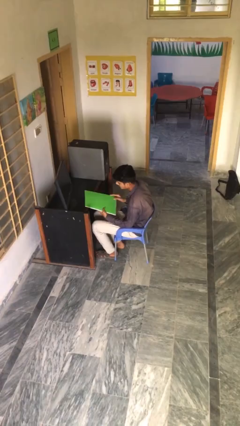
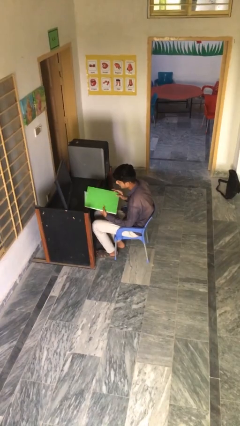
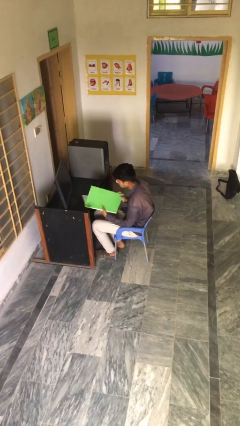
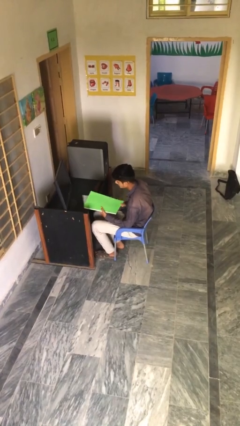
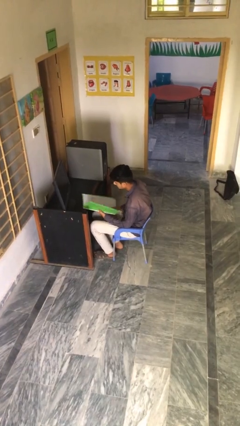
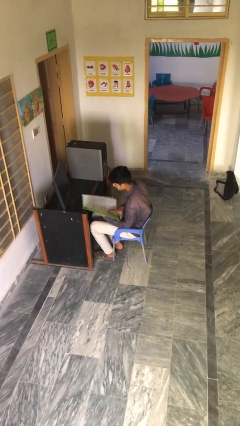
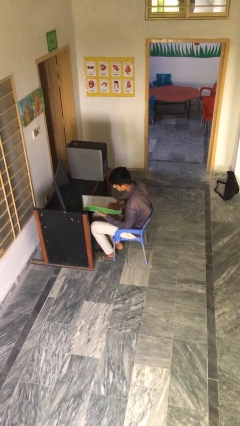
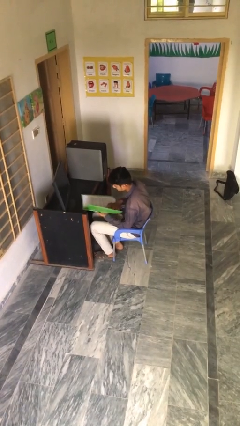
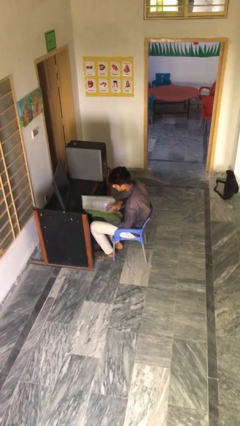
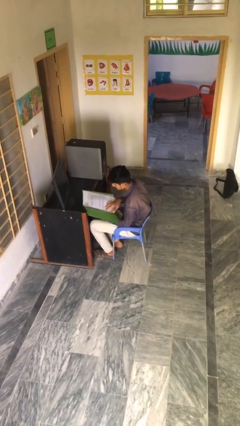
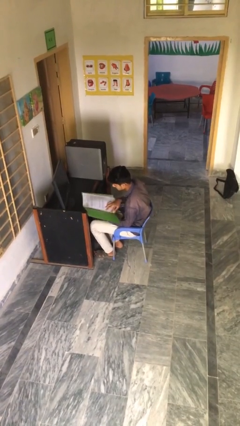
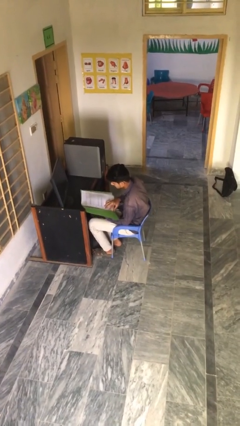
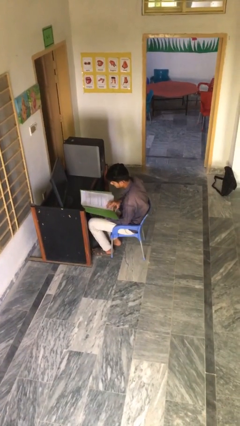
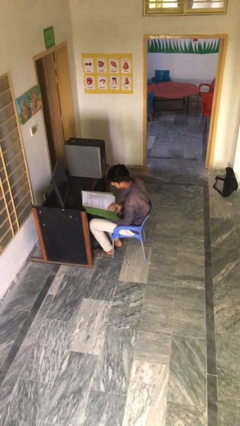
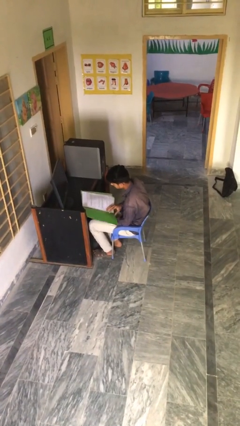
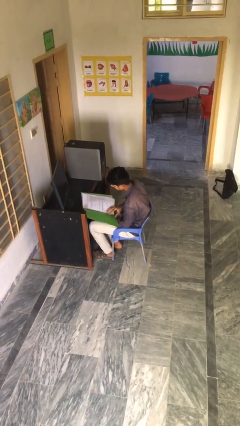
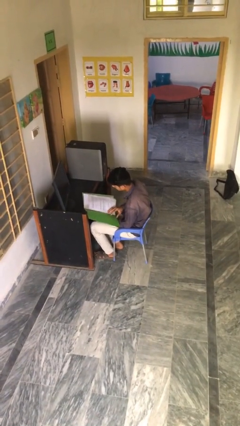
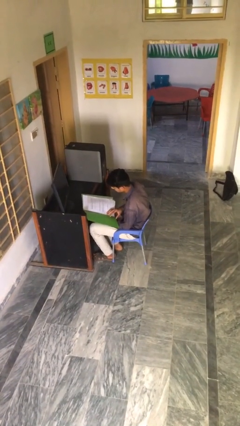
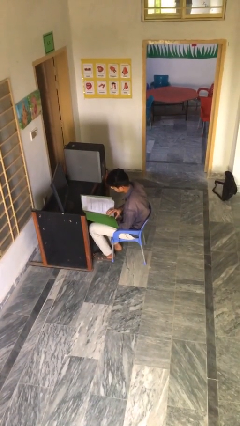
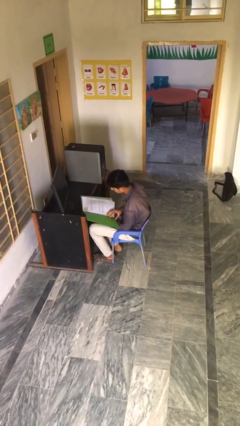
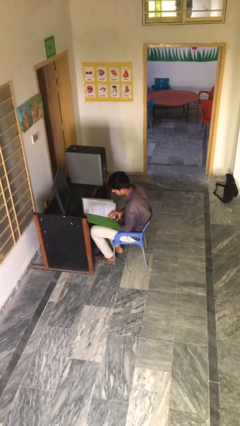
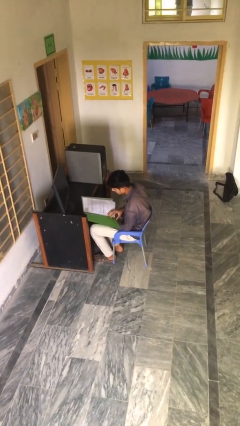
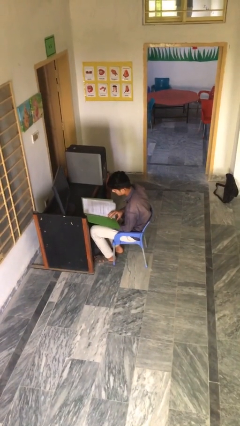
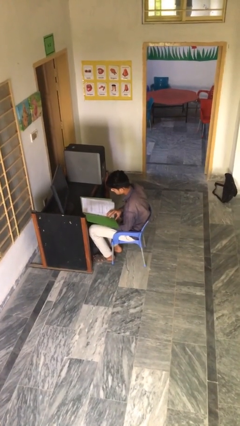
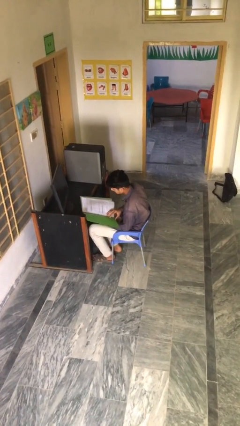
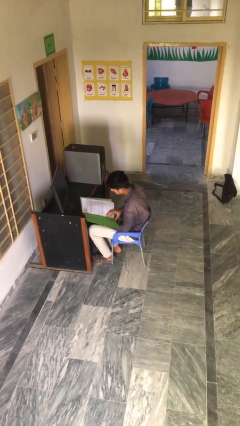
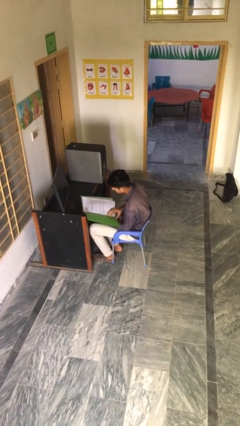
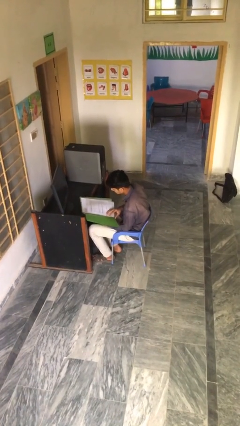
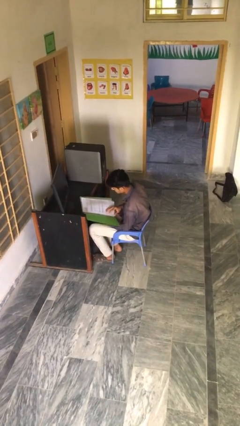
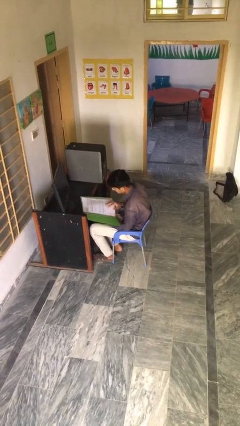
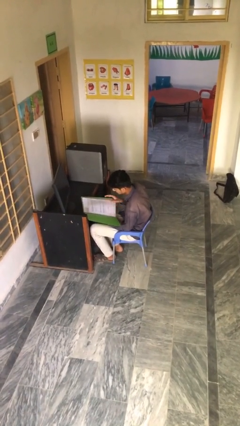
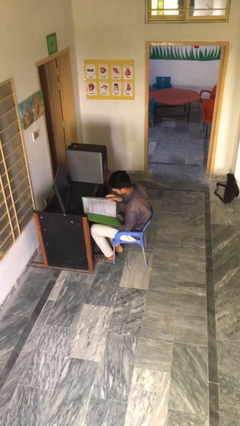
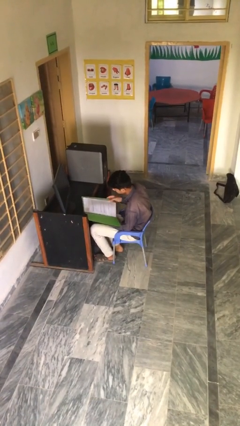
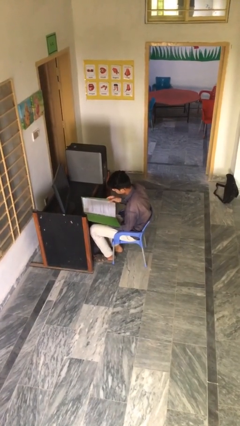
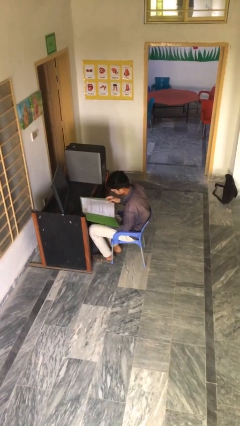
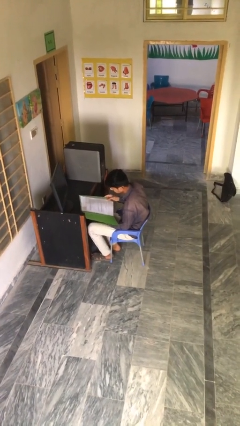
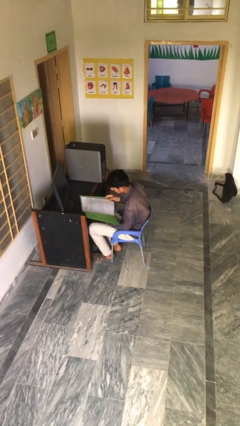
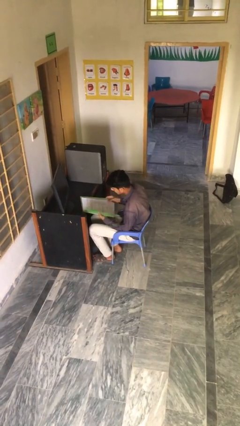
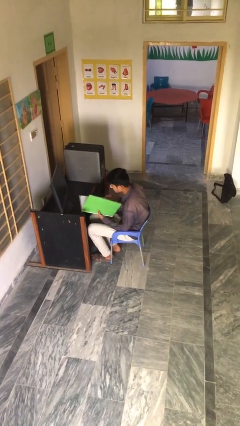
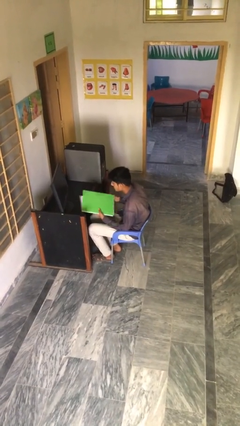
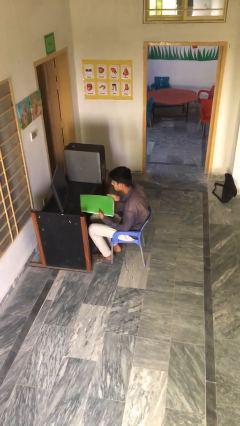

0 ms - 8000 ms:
person reads document

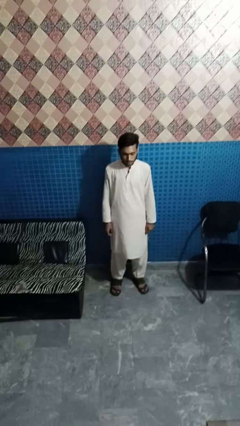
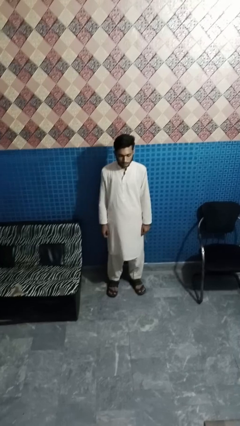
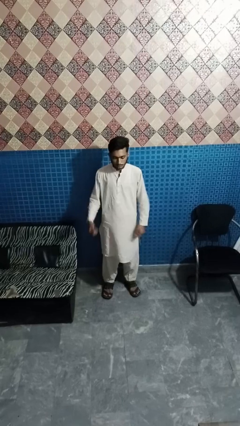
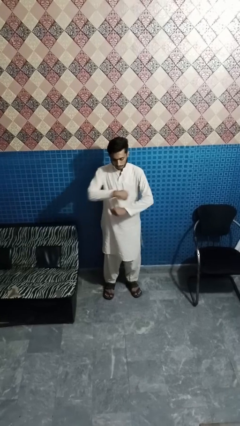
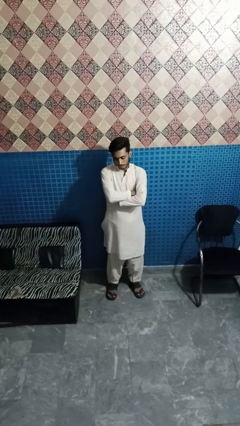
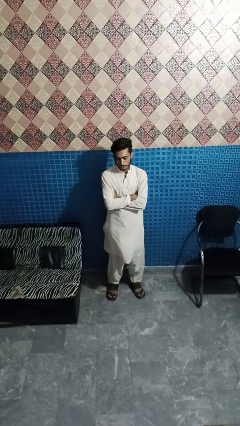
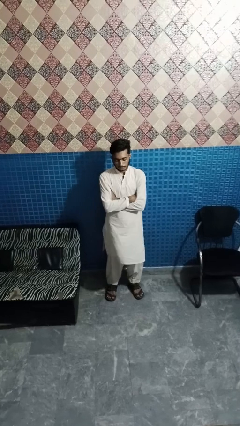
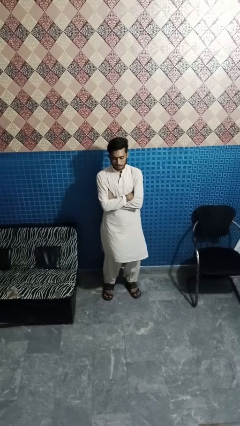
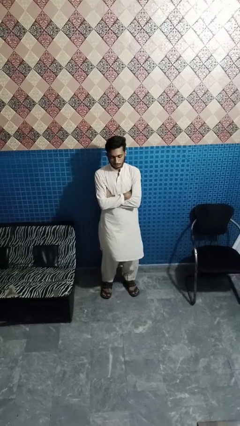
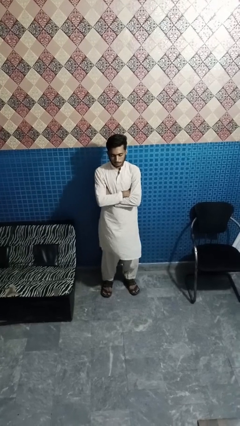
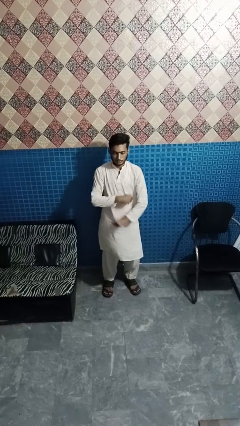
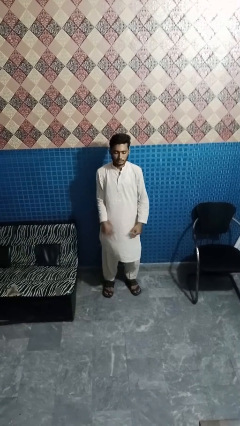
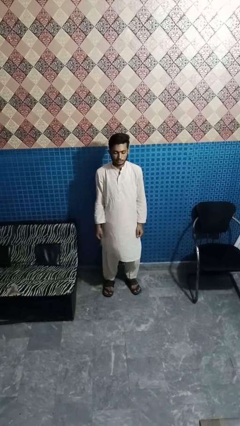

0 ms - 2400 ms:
person crosses arms

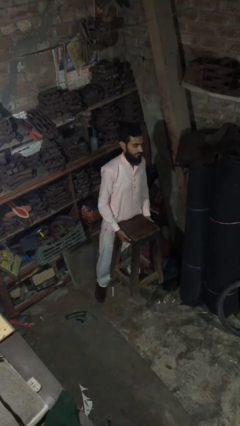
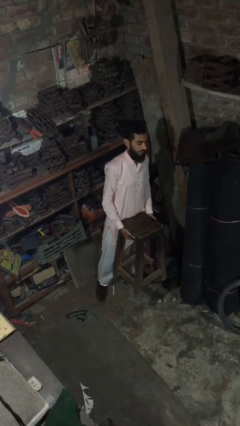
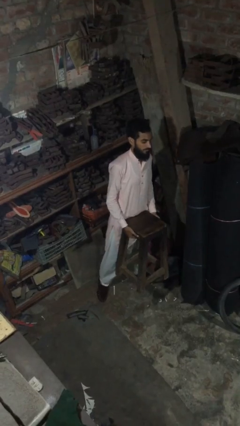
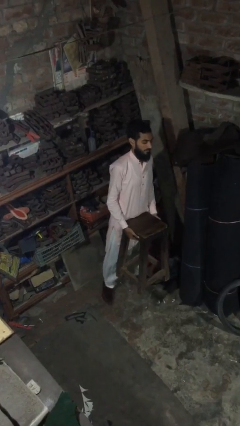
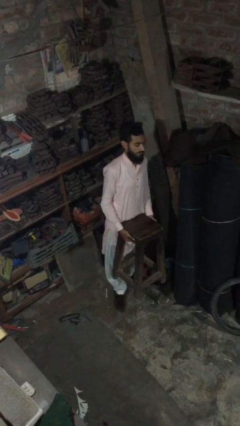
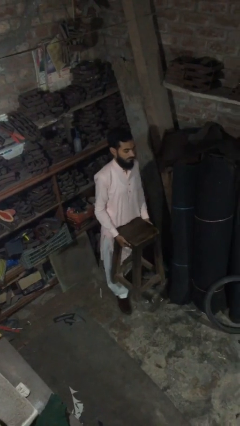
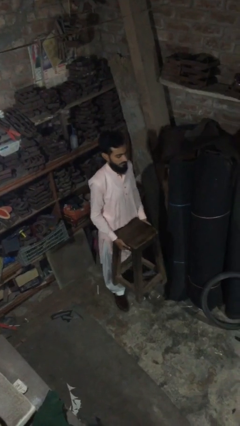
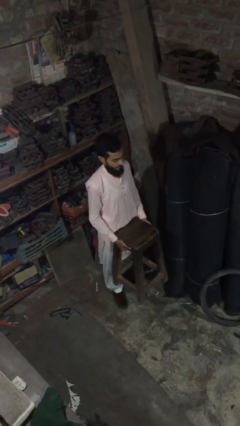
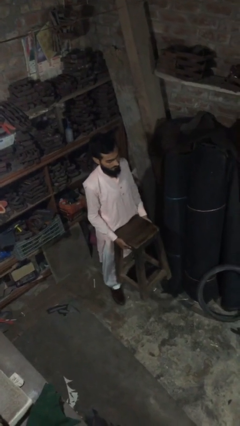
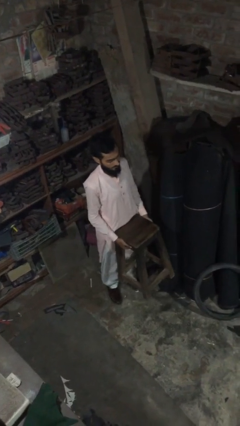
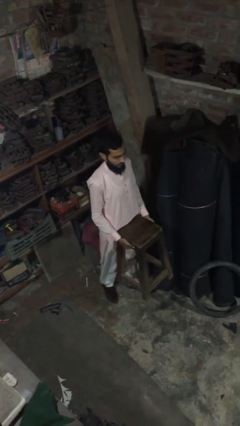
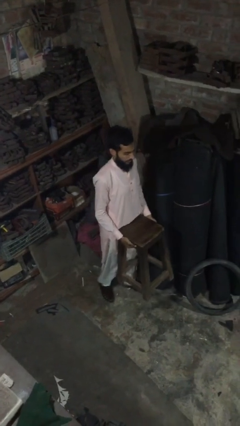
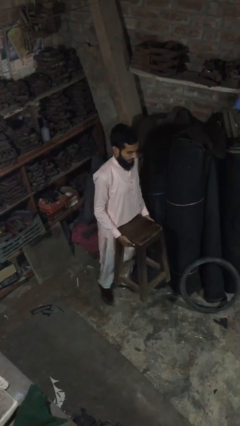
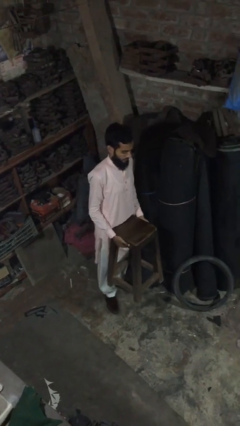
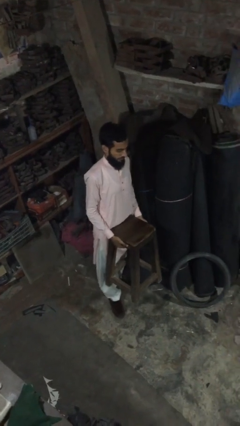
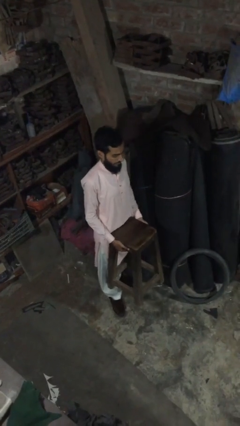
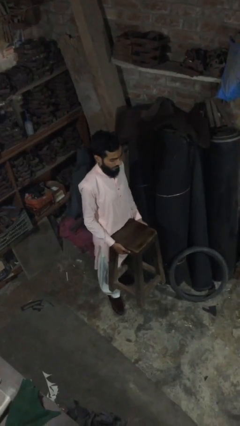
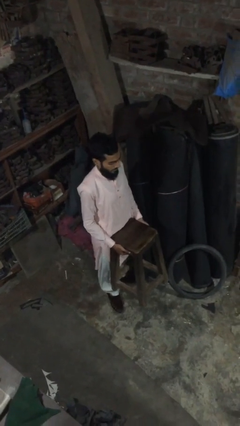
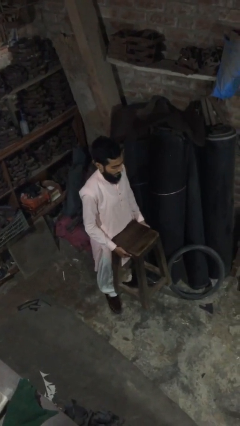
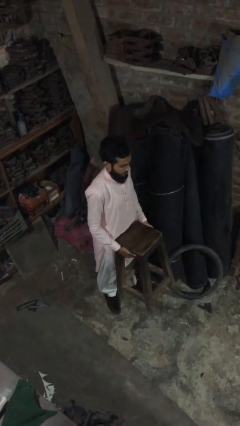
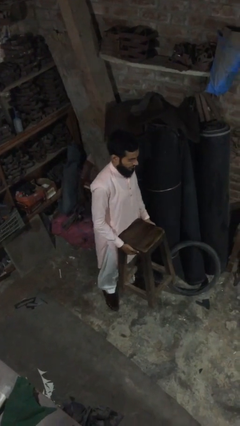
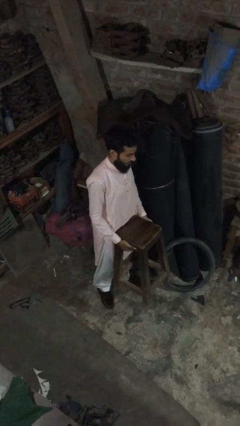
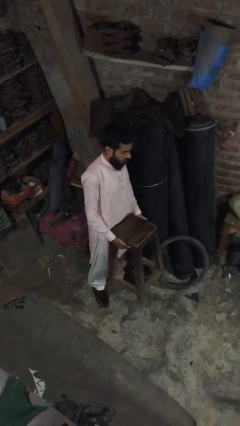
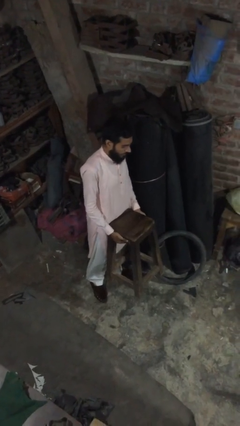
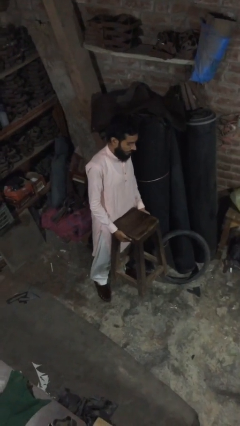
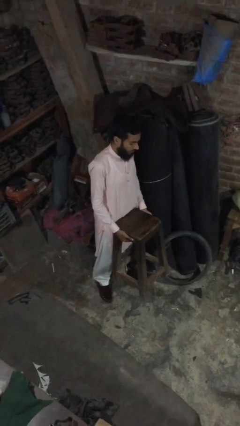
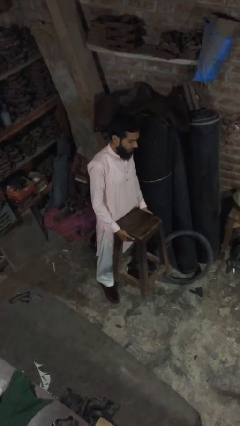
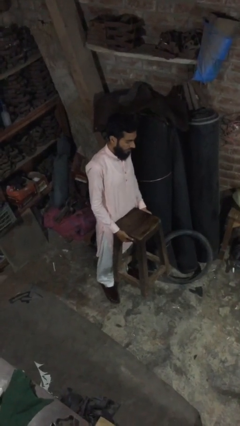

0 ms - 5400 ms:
person carries heavy object

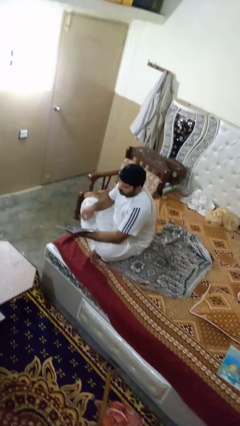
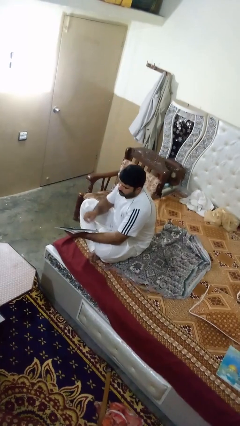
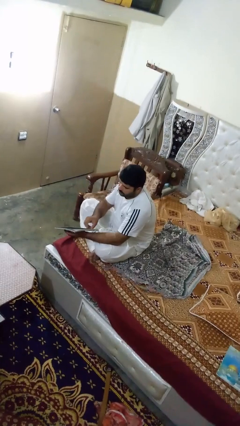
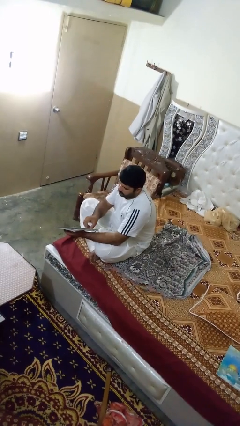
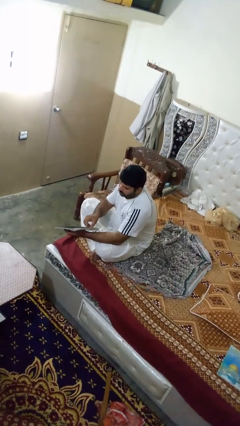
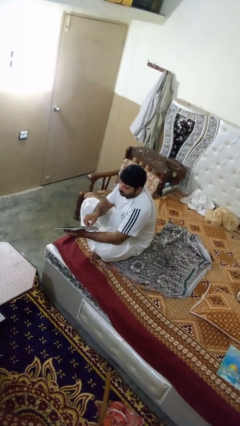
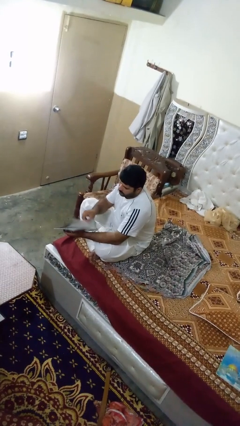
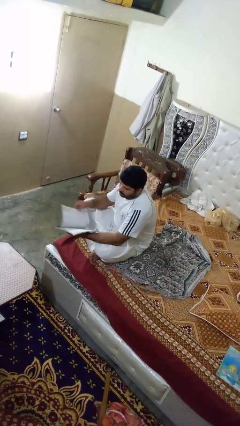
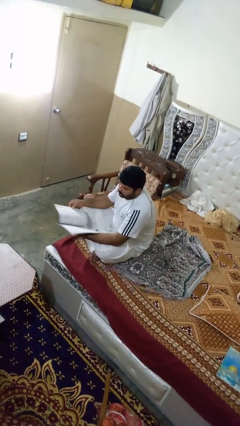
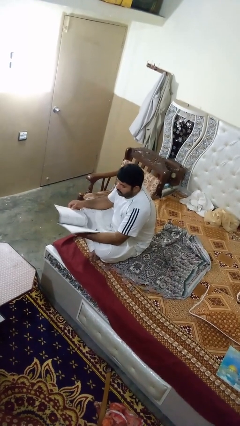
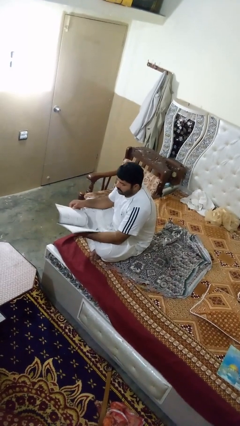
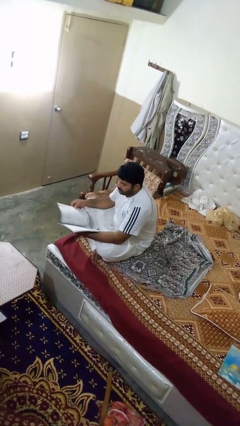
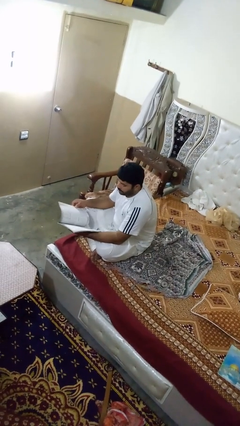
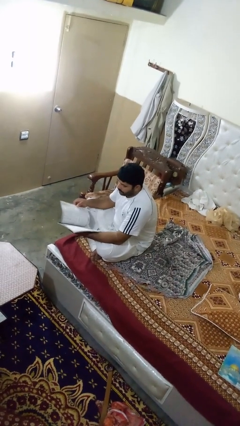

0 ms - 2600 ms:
person reads magazine
